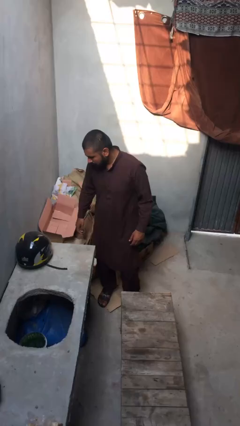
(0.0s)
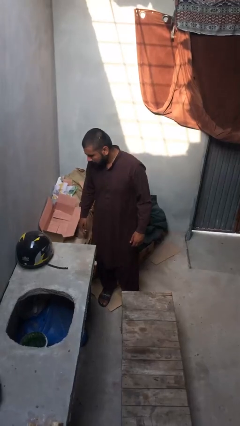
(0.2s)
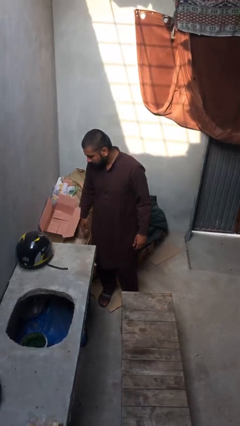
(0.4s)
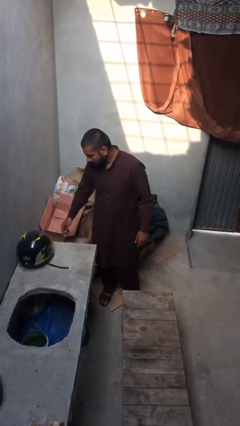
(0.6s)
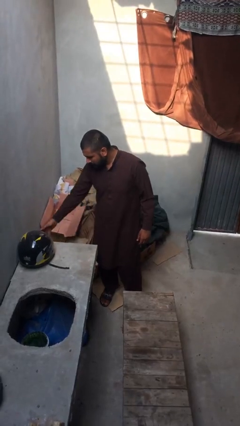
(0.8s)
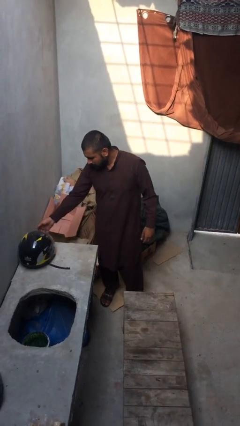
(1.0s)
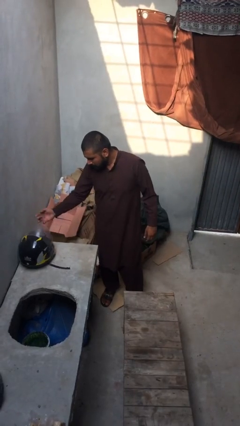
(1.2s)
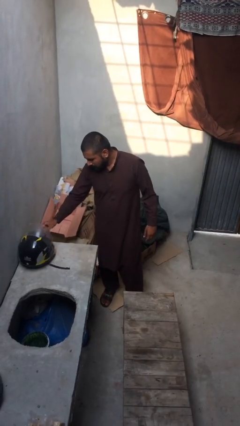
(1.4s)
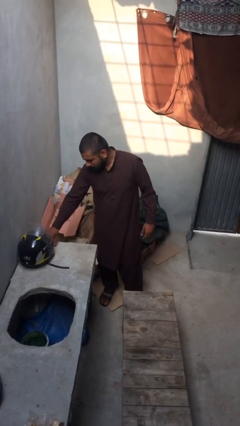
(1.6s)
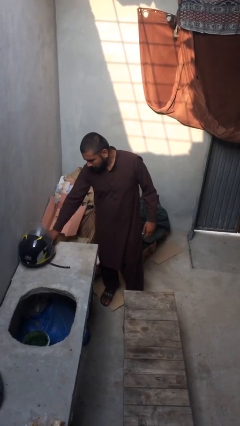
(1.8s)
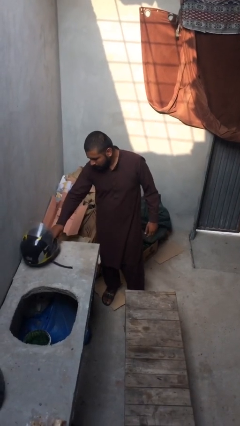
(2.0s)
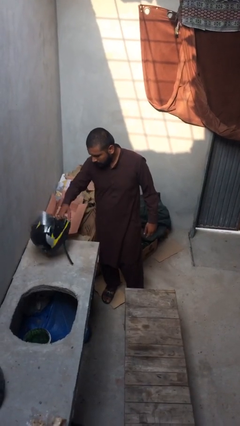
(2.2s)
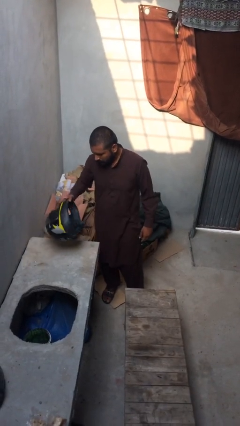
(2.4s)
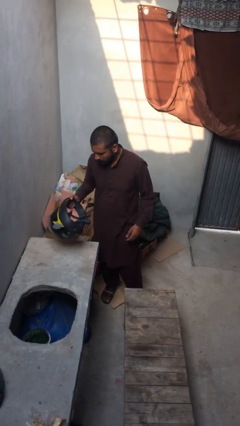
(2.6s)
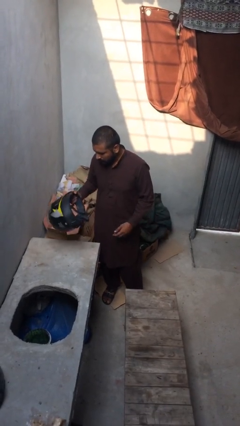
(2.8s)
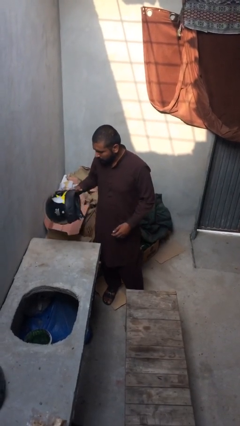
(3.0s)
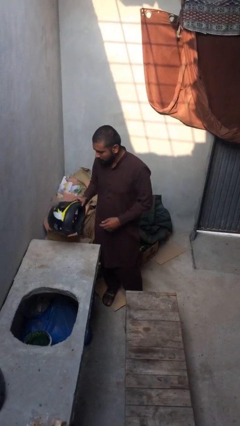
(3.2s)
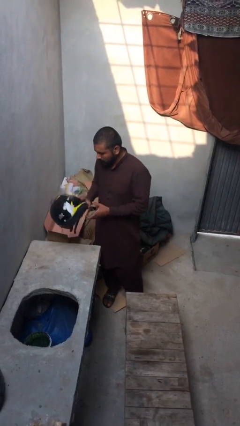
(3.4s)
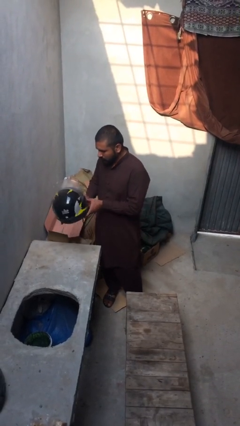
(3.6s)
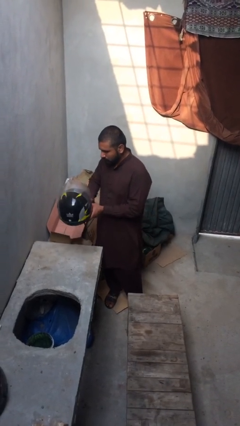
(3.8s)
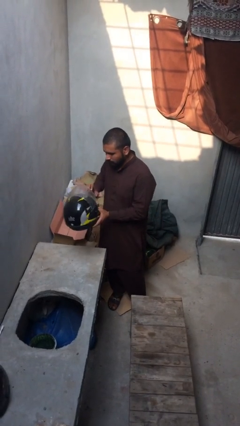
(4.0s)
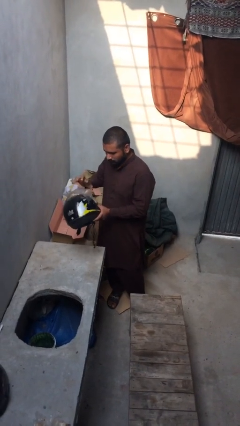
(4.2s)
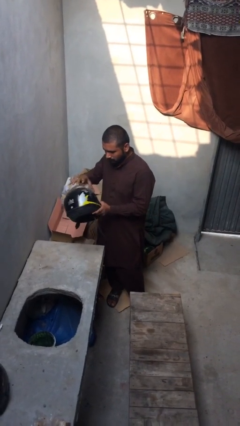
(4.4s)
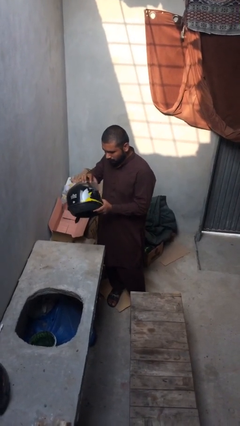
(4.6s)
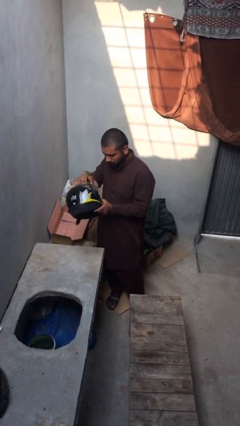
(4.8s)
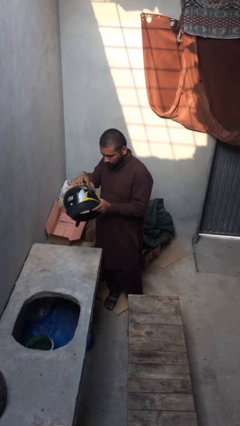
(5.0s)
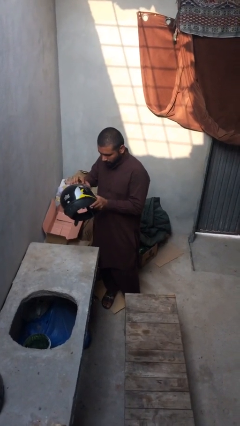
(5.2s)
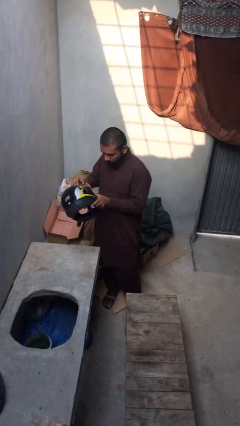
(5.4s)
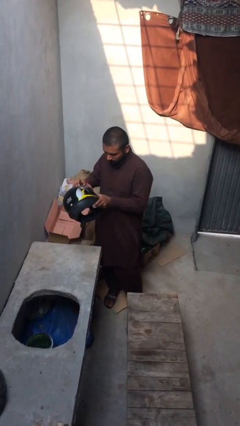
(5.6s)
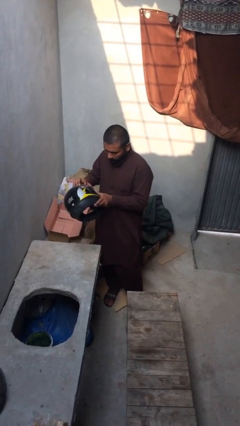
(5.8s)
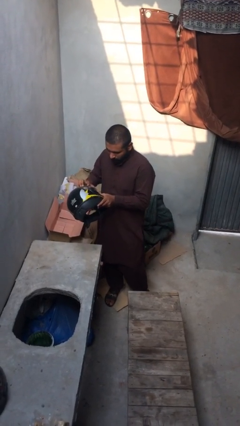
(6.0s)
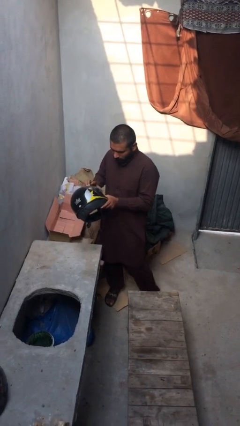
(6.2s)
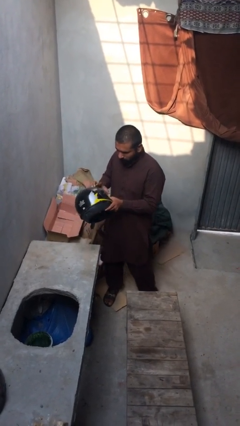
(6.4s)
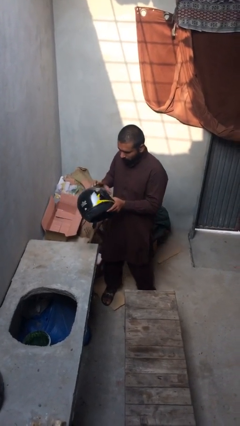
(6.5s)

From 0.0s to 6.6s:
person picks up object from shelf

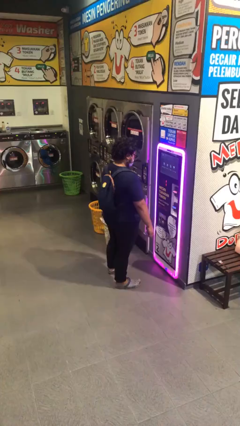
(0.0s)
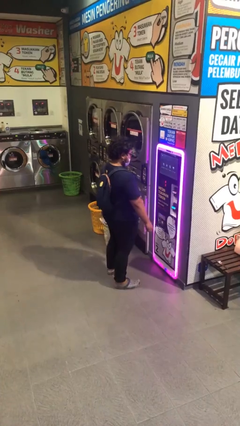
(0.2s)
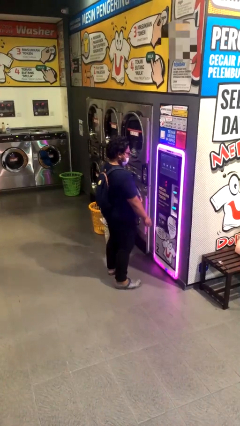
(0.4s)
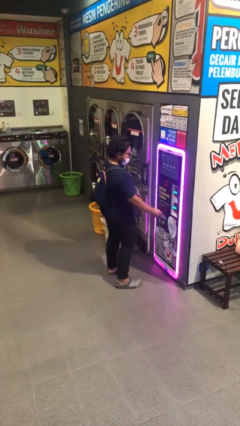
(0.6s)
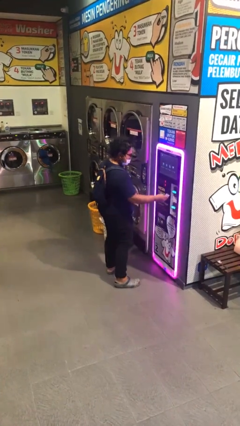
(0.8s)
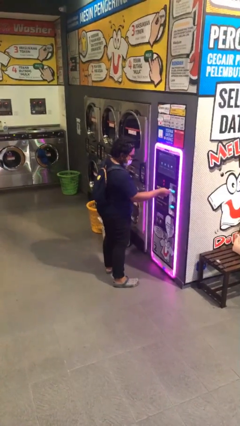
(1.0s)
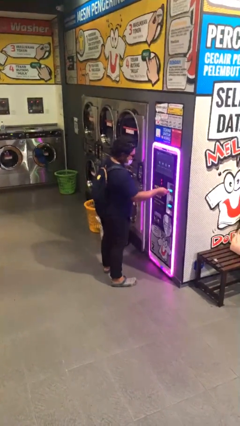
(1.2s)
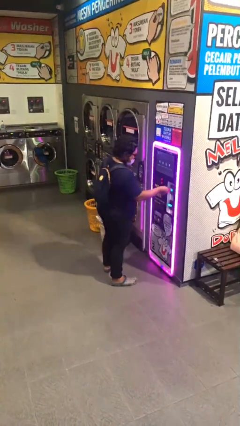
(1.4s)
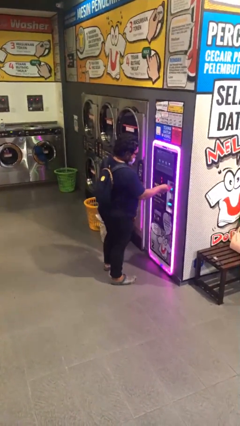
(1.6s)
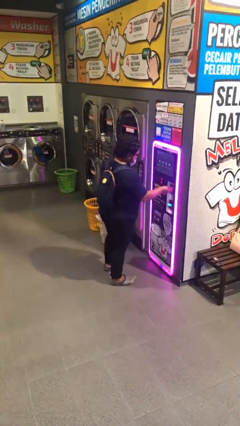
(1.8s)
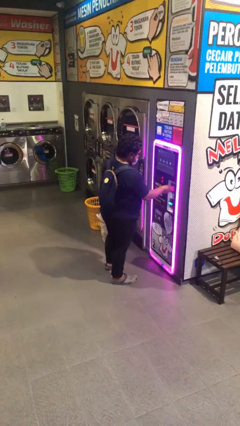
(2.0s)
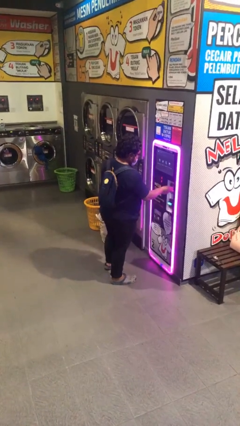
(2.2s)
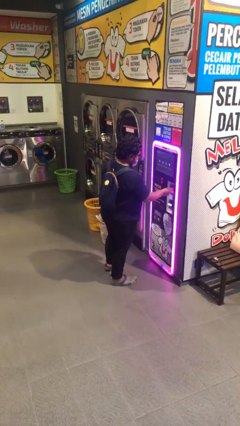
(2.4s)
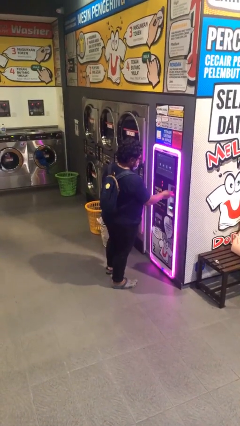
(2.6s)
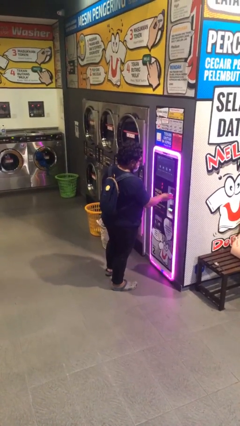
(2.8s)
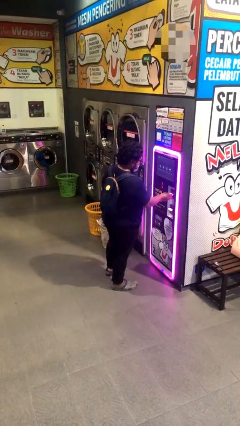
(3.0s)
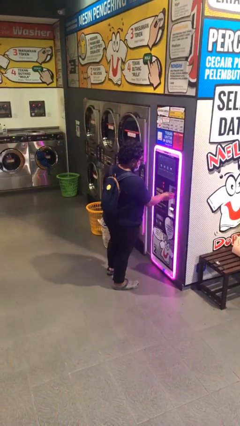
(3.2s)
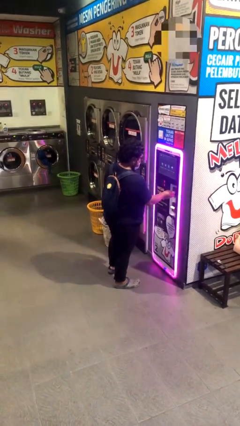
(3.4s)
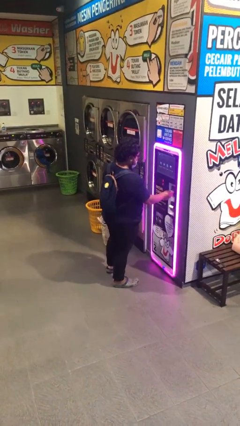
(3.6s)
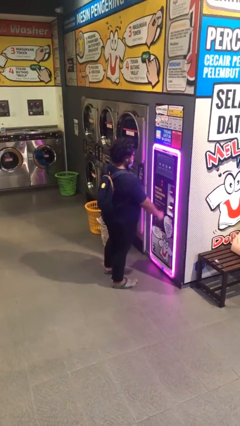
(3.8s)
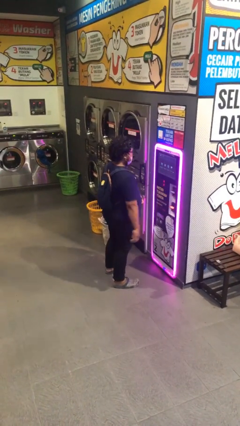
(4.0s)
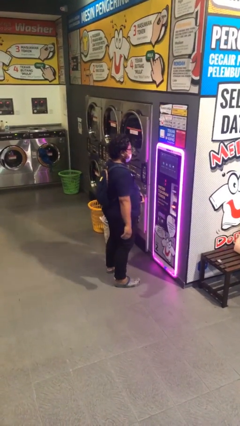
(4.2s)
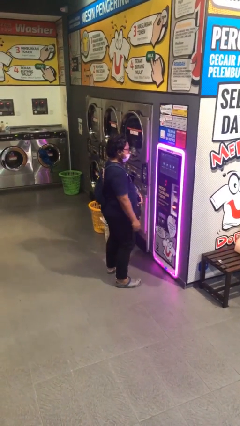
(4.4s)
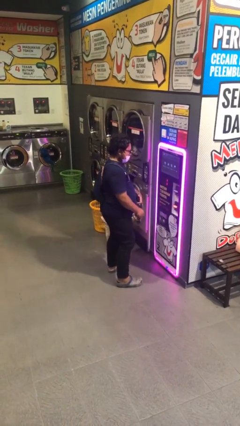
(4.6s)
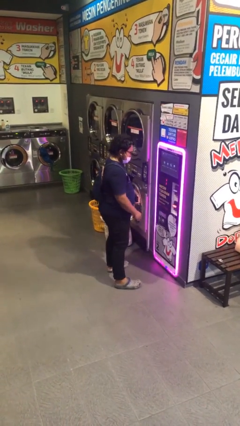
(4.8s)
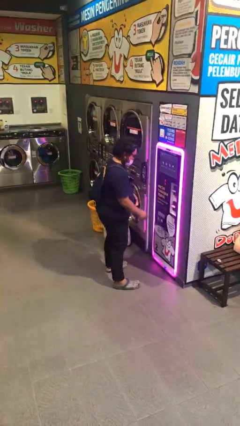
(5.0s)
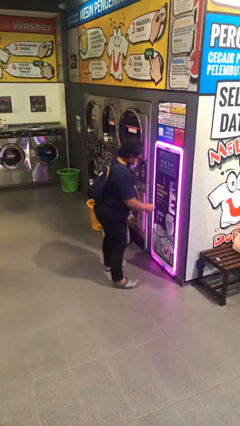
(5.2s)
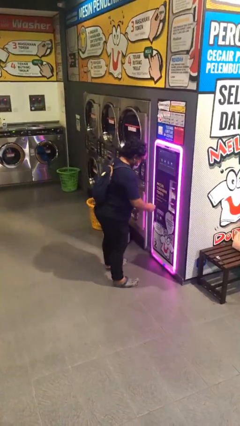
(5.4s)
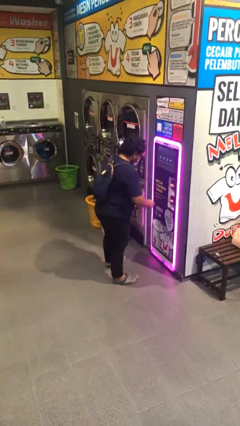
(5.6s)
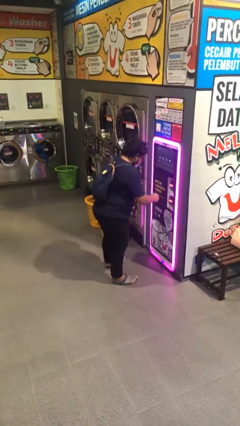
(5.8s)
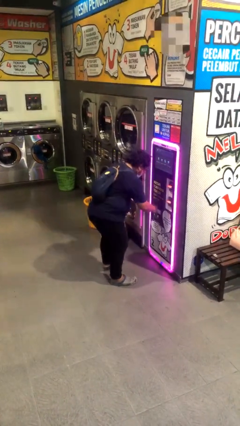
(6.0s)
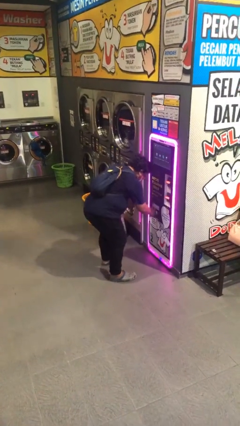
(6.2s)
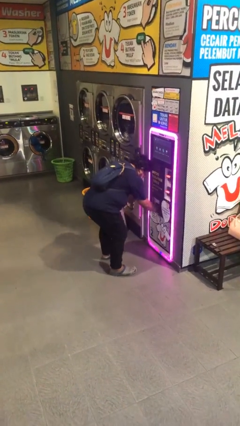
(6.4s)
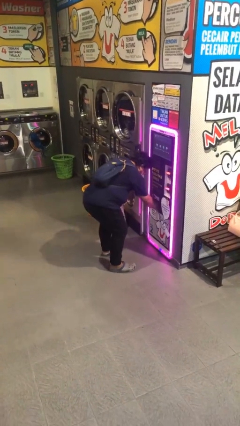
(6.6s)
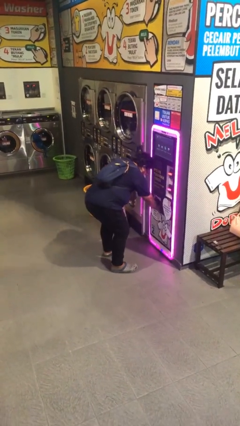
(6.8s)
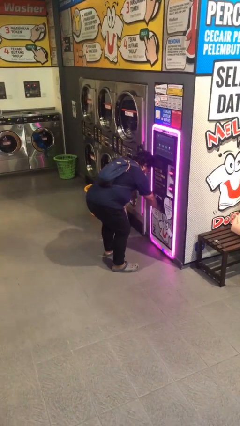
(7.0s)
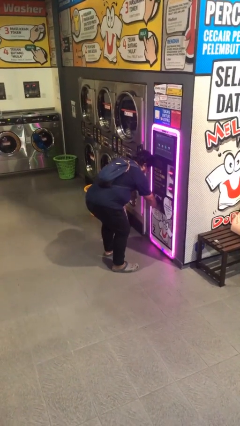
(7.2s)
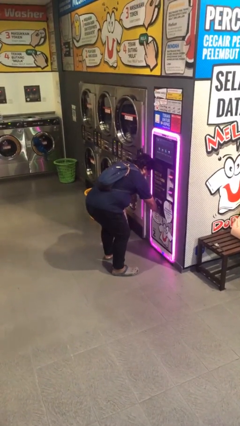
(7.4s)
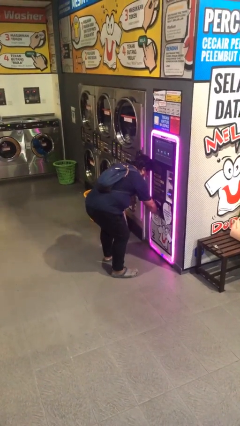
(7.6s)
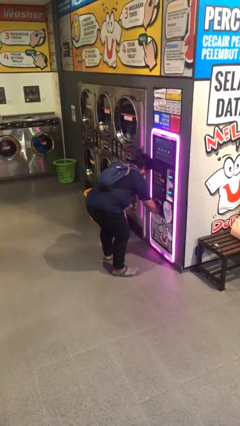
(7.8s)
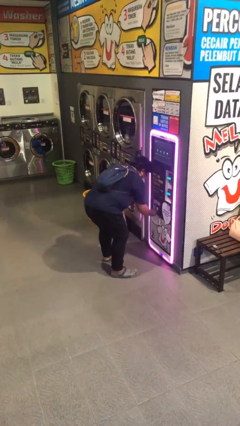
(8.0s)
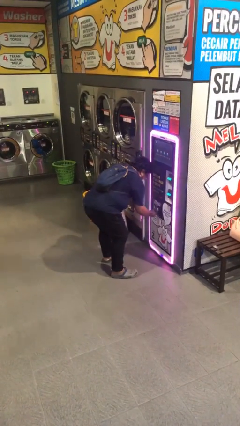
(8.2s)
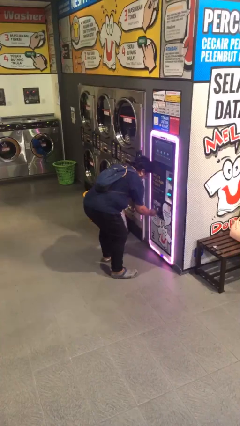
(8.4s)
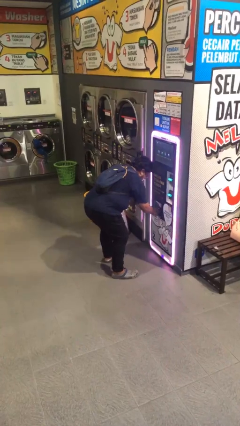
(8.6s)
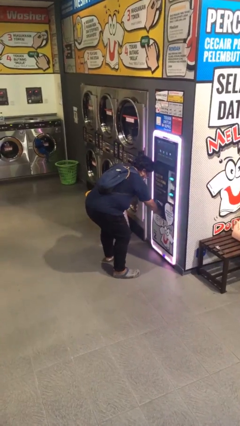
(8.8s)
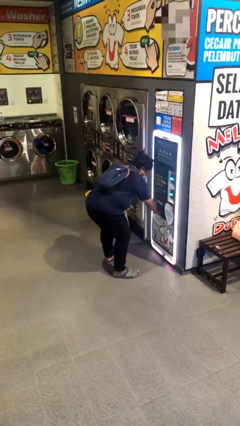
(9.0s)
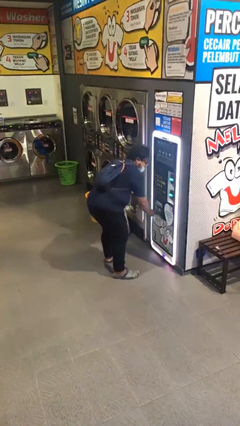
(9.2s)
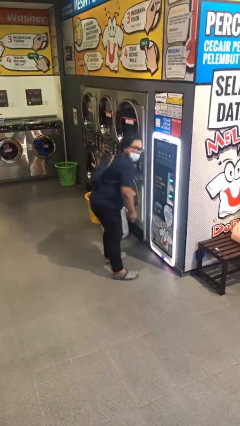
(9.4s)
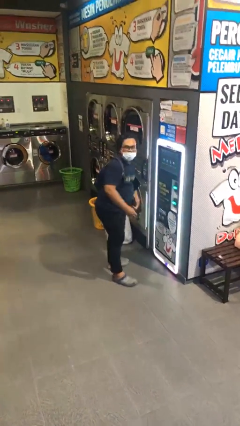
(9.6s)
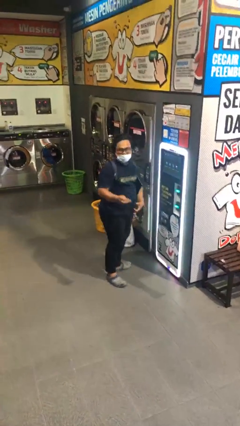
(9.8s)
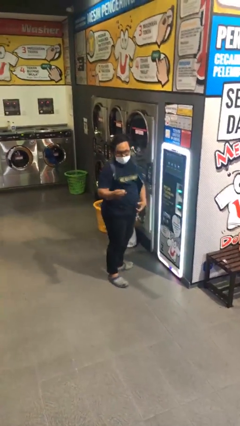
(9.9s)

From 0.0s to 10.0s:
person purchases from machine

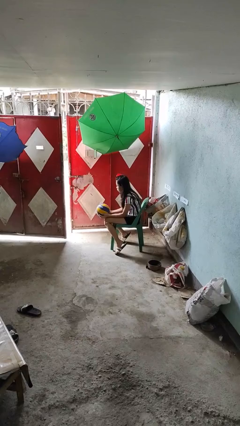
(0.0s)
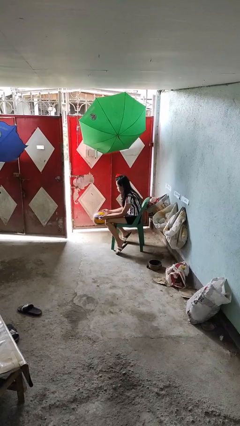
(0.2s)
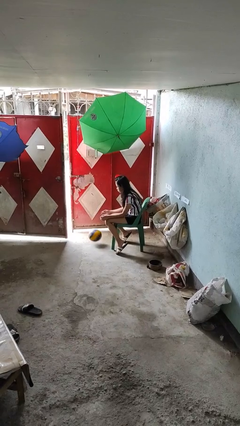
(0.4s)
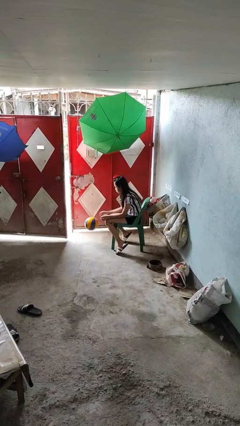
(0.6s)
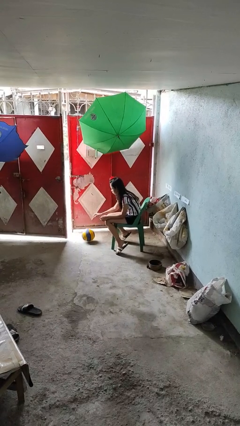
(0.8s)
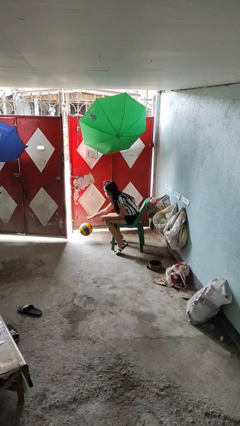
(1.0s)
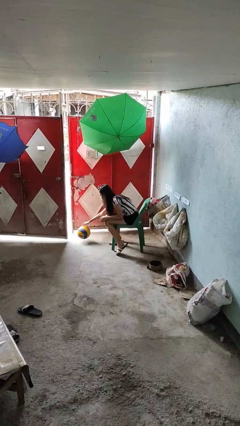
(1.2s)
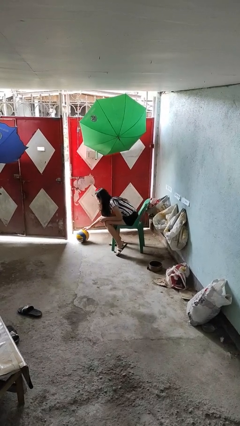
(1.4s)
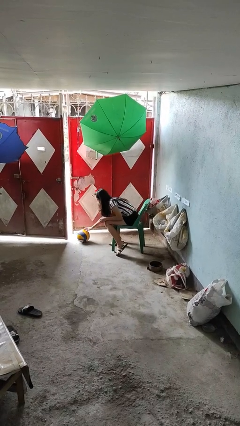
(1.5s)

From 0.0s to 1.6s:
person drops object

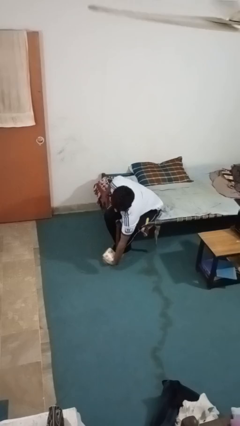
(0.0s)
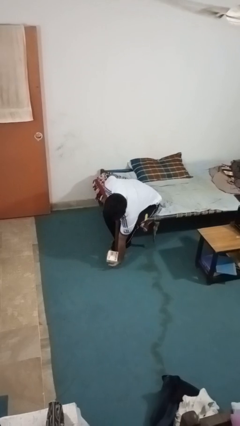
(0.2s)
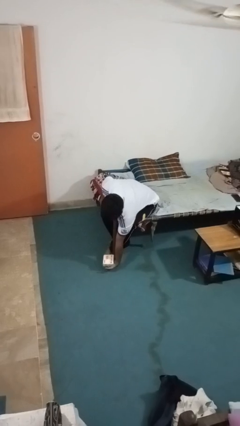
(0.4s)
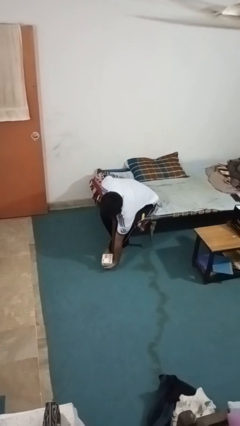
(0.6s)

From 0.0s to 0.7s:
person picks up object from floor
